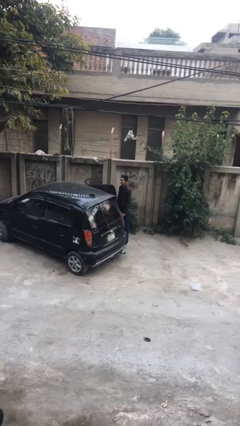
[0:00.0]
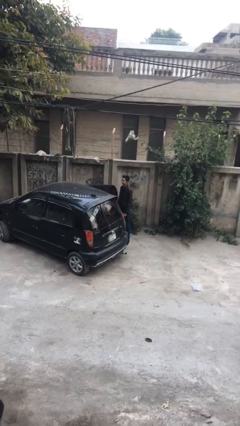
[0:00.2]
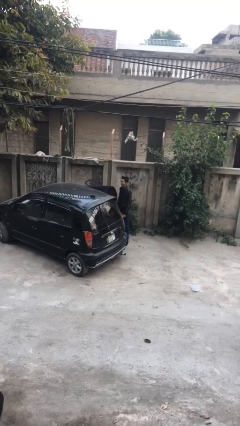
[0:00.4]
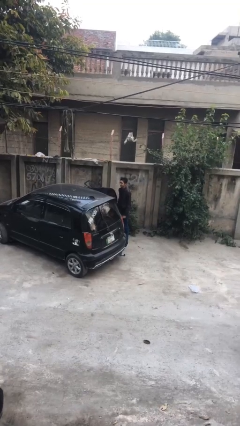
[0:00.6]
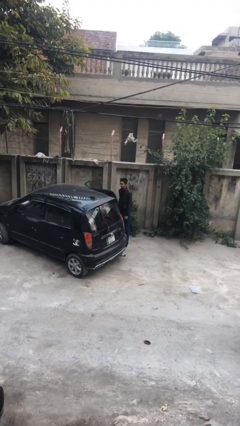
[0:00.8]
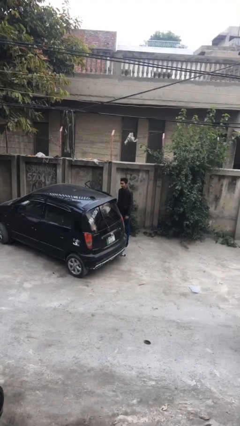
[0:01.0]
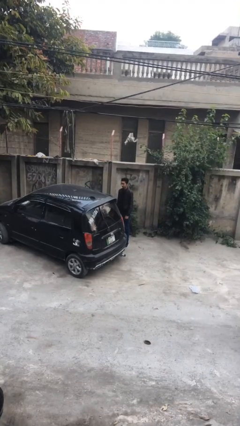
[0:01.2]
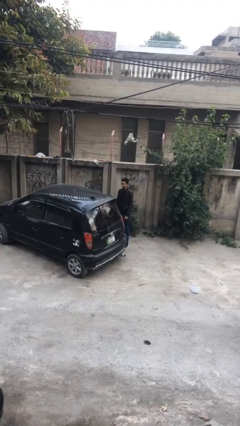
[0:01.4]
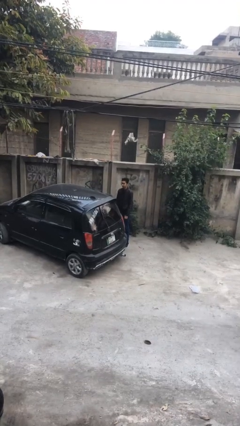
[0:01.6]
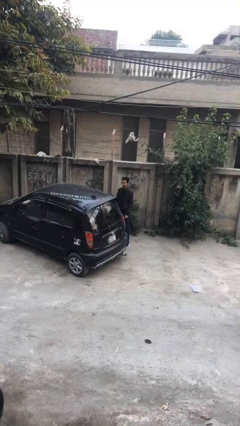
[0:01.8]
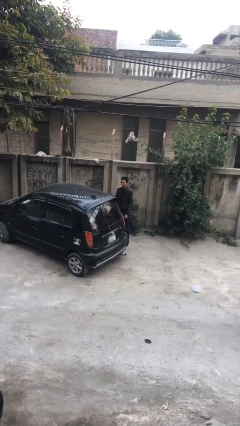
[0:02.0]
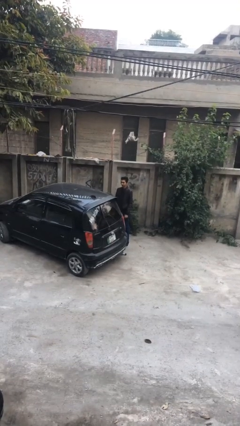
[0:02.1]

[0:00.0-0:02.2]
person closes car door

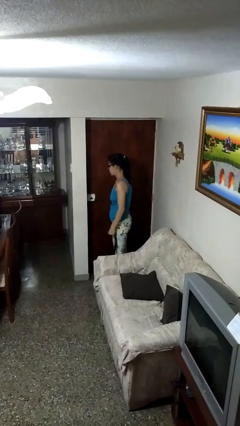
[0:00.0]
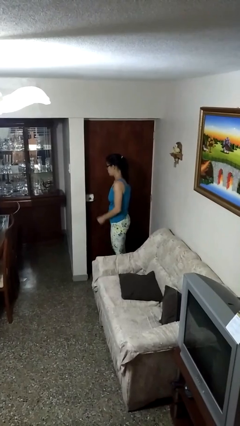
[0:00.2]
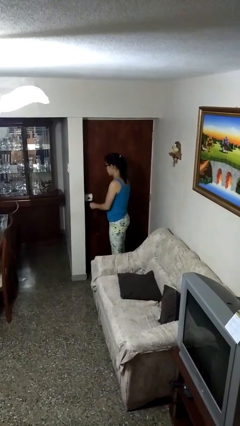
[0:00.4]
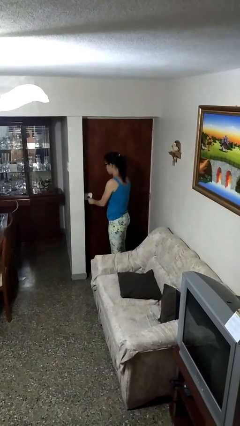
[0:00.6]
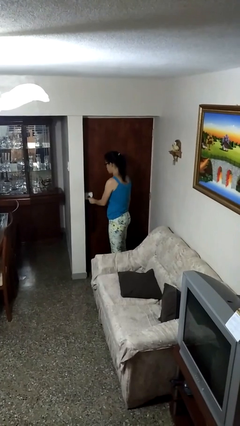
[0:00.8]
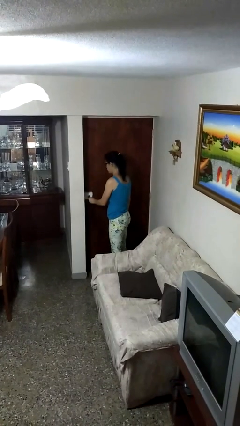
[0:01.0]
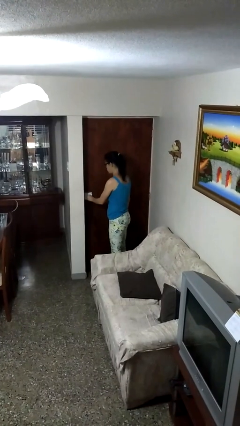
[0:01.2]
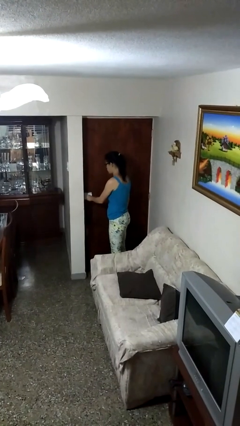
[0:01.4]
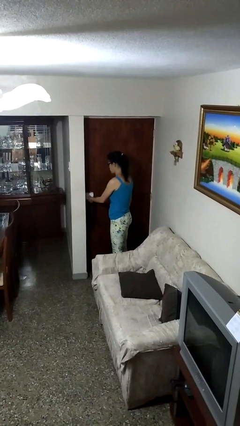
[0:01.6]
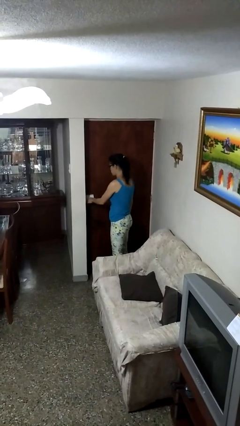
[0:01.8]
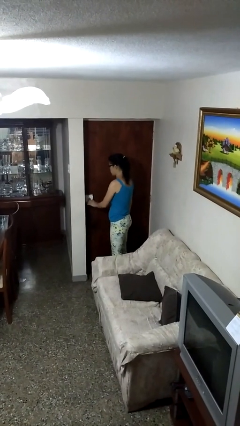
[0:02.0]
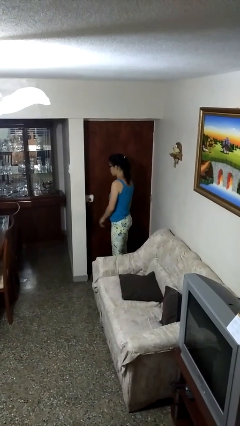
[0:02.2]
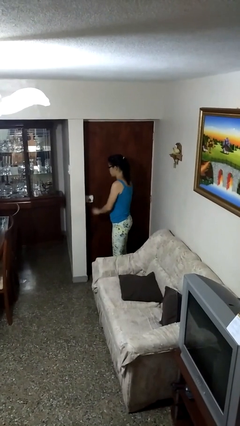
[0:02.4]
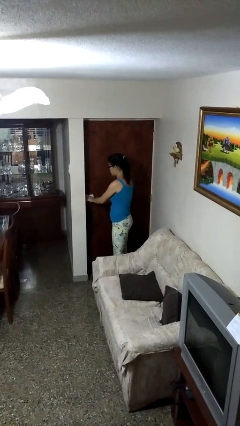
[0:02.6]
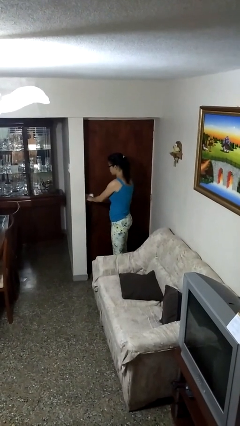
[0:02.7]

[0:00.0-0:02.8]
person unlocks door with keys

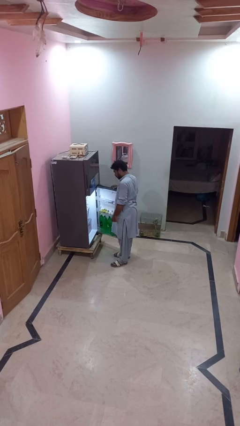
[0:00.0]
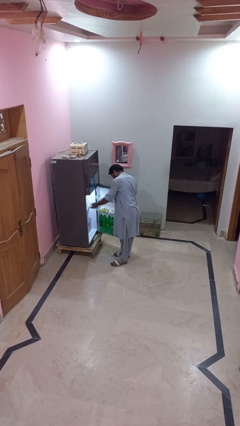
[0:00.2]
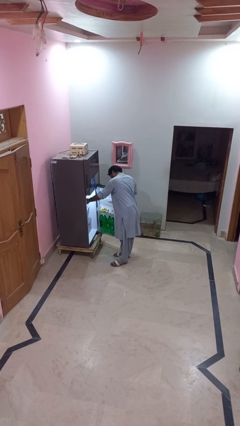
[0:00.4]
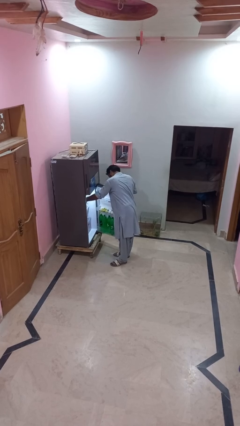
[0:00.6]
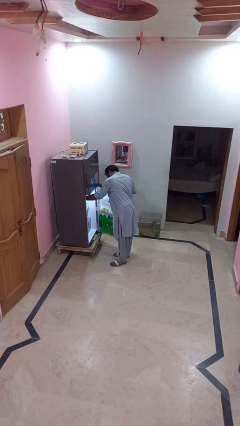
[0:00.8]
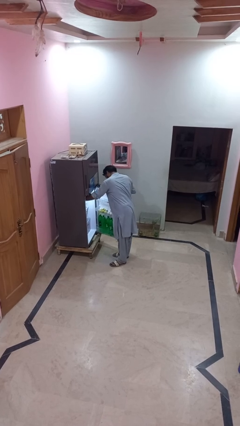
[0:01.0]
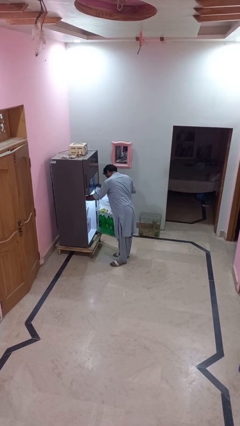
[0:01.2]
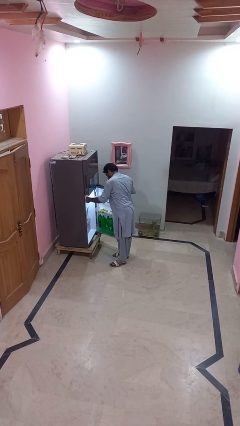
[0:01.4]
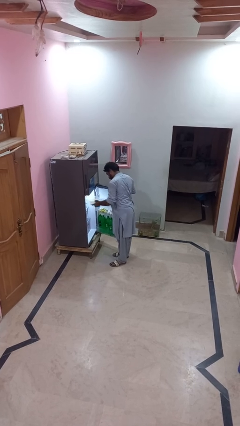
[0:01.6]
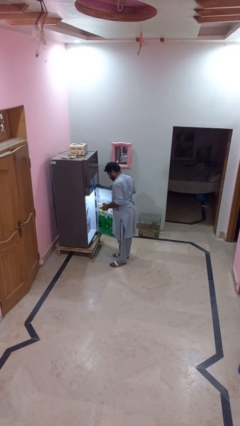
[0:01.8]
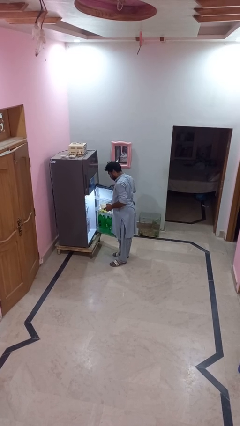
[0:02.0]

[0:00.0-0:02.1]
person takes object from refrigerator

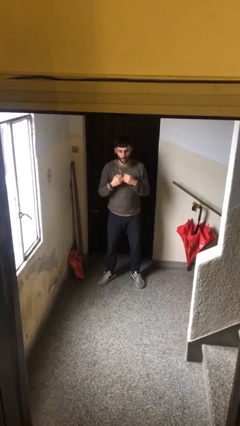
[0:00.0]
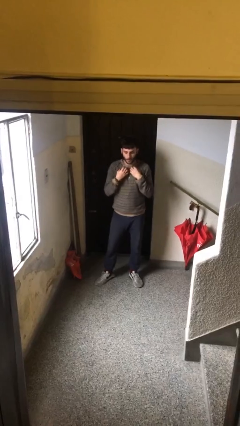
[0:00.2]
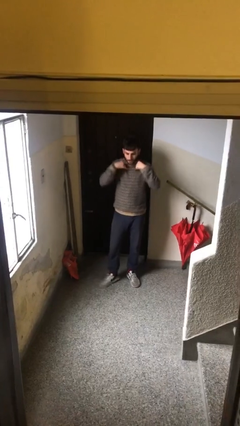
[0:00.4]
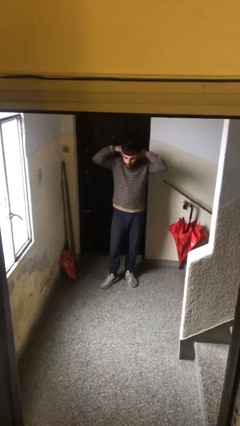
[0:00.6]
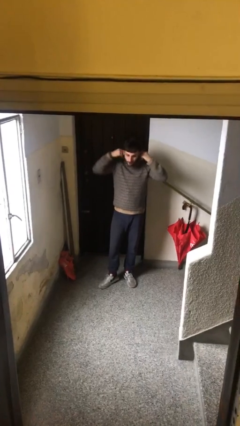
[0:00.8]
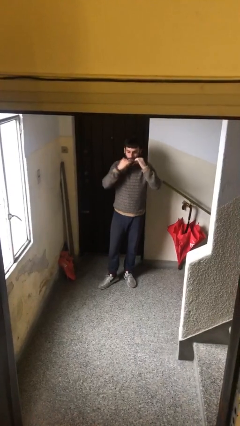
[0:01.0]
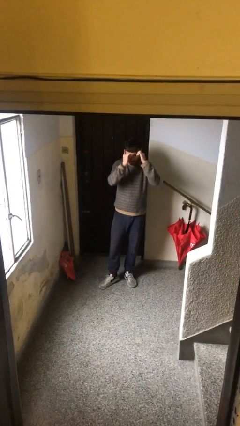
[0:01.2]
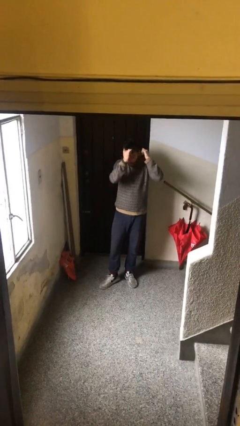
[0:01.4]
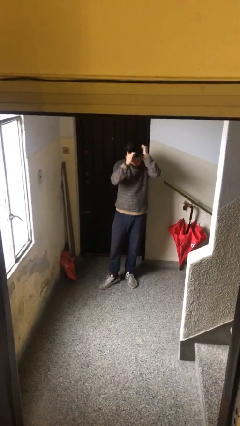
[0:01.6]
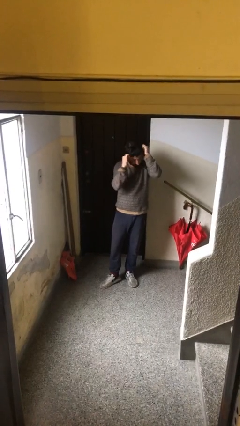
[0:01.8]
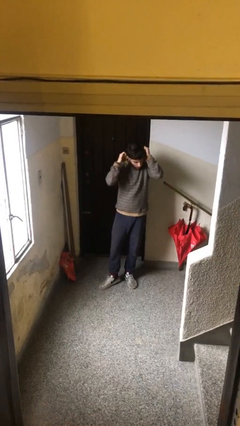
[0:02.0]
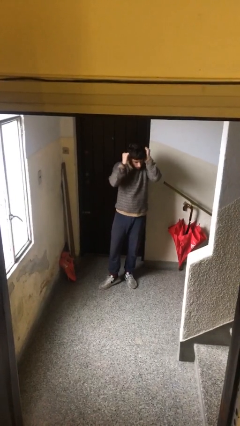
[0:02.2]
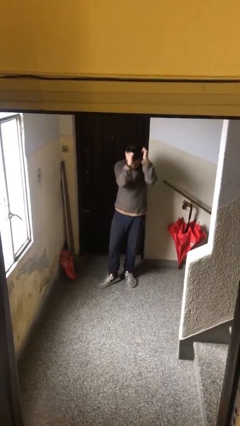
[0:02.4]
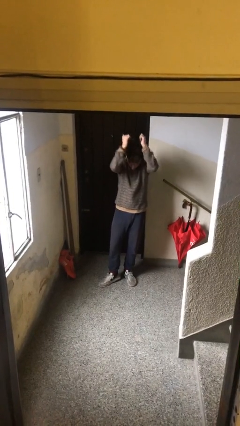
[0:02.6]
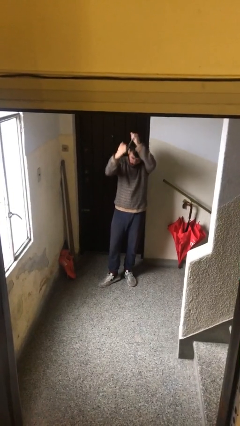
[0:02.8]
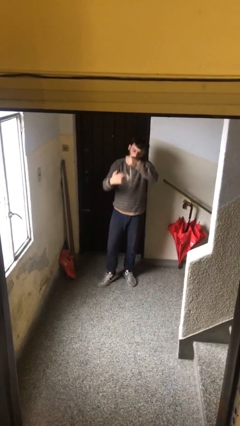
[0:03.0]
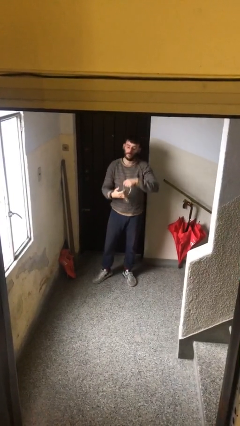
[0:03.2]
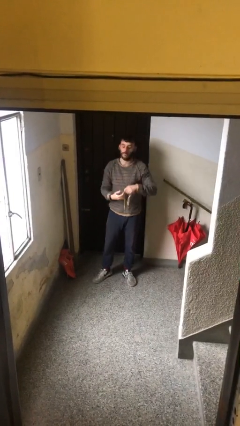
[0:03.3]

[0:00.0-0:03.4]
person takes off necklace

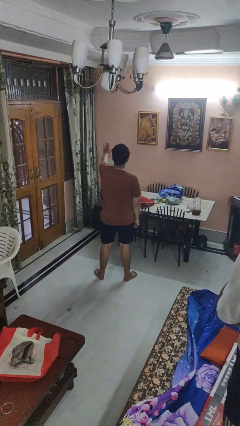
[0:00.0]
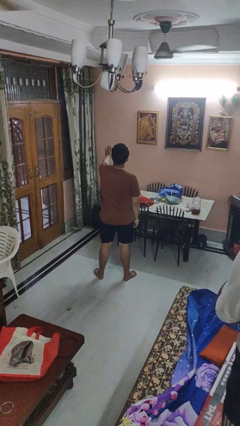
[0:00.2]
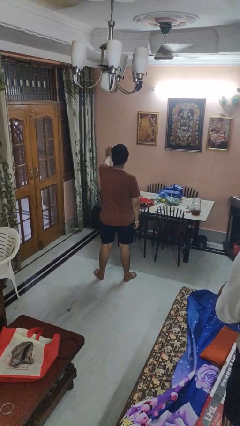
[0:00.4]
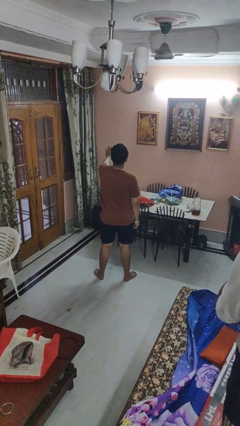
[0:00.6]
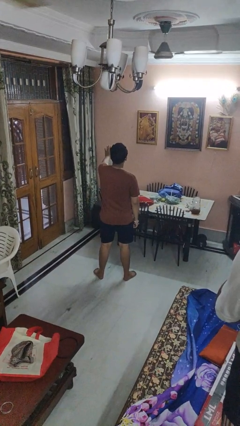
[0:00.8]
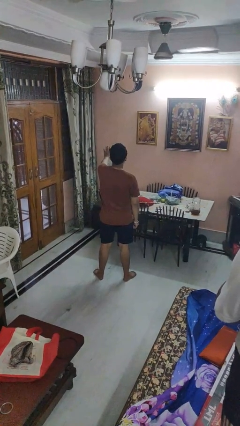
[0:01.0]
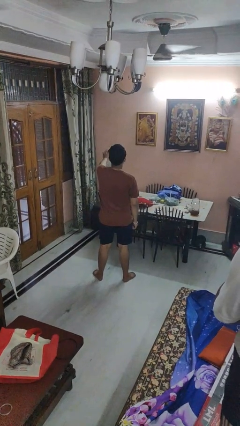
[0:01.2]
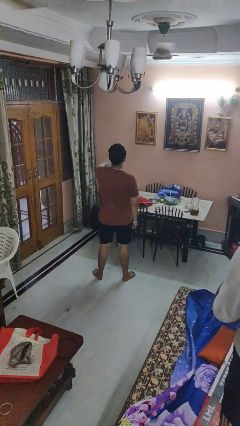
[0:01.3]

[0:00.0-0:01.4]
person gestures stop

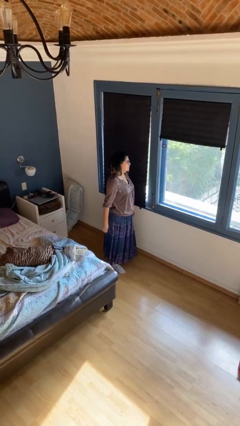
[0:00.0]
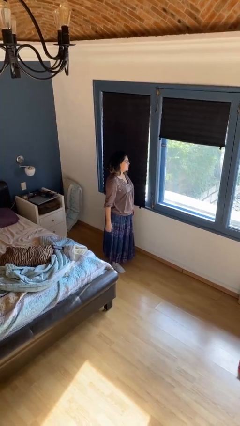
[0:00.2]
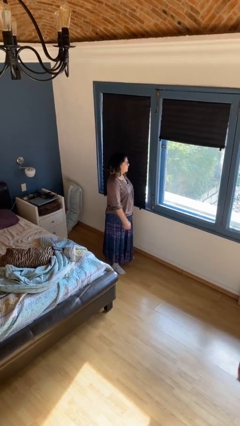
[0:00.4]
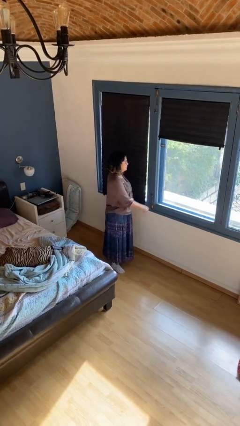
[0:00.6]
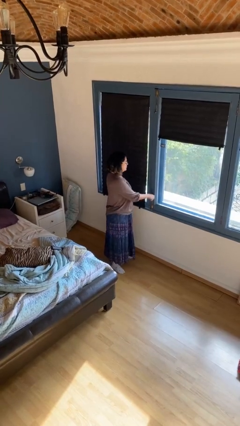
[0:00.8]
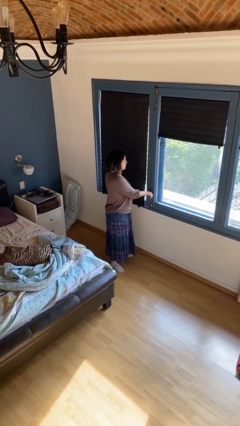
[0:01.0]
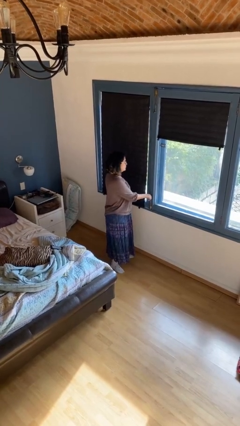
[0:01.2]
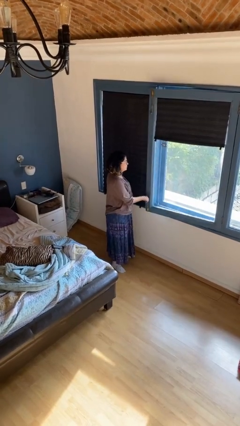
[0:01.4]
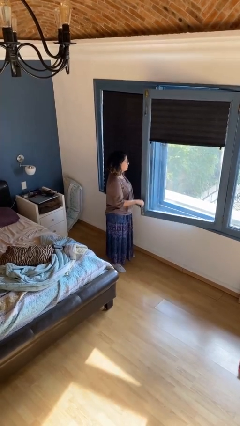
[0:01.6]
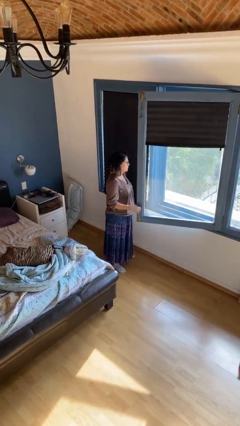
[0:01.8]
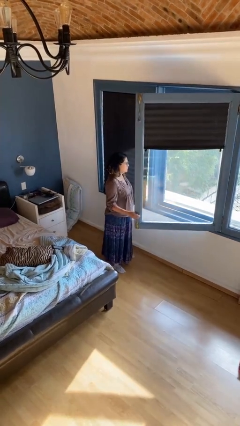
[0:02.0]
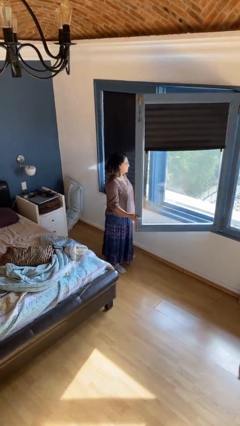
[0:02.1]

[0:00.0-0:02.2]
person opens home window

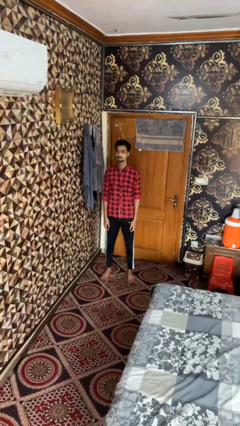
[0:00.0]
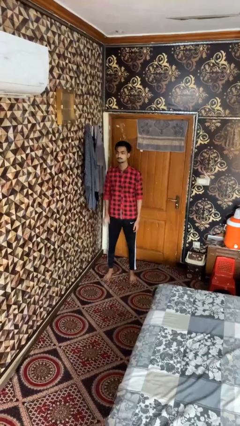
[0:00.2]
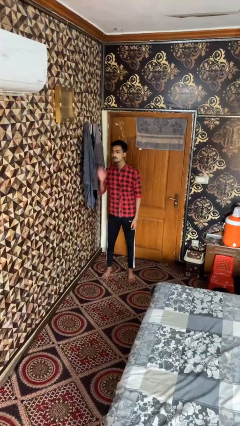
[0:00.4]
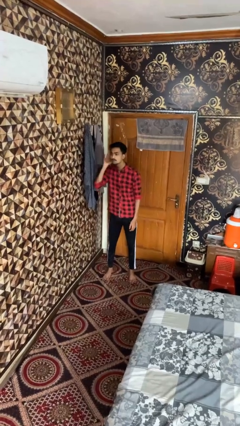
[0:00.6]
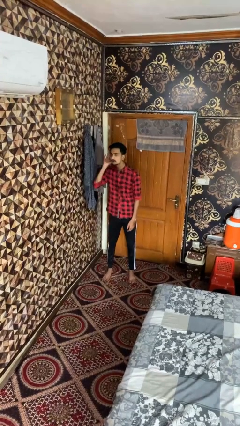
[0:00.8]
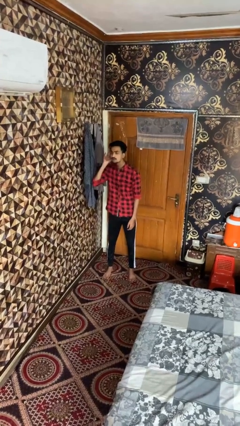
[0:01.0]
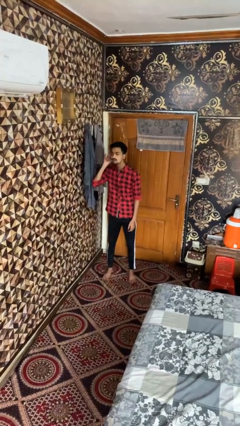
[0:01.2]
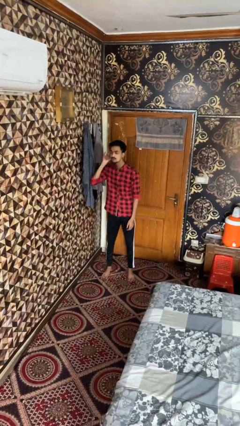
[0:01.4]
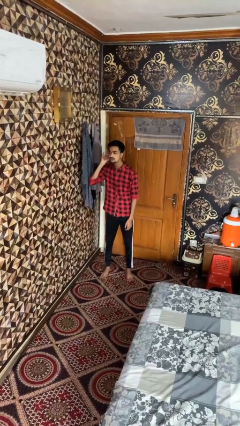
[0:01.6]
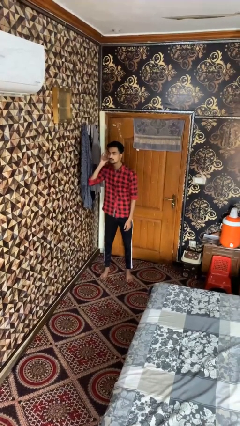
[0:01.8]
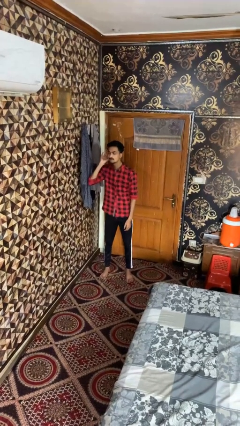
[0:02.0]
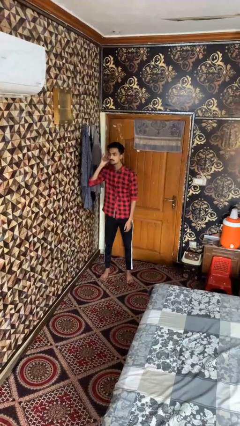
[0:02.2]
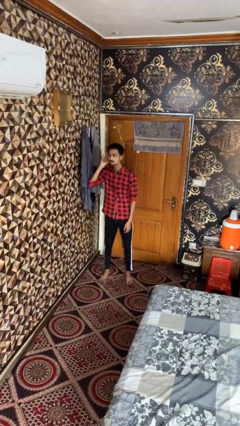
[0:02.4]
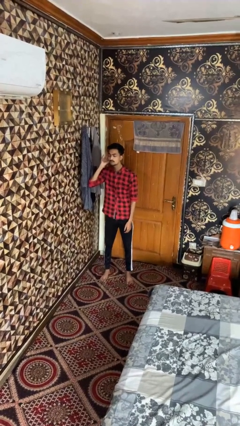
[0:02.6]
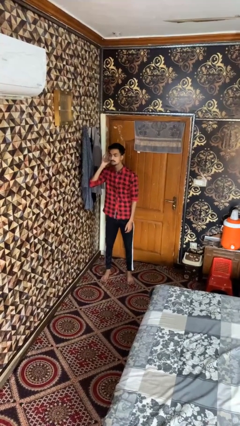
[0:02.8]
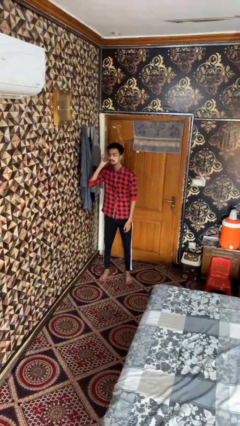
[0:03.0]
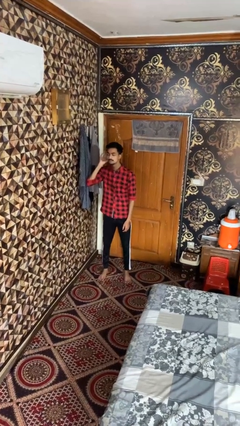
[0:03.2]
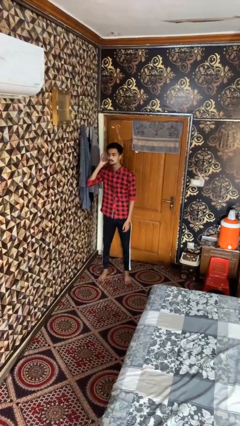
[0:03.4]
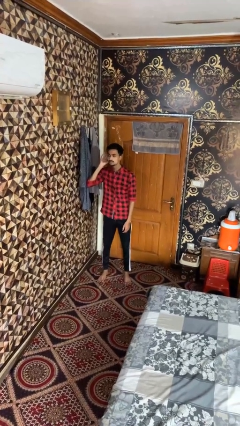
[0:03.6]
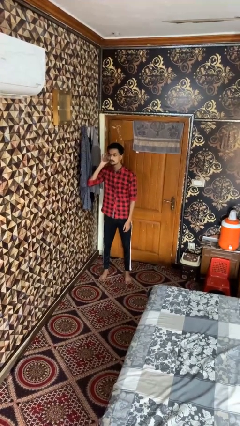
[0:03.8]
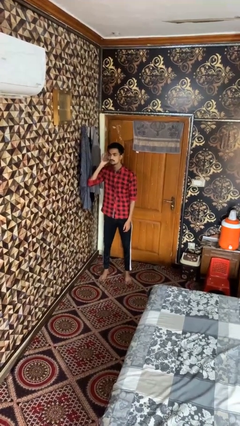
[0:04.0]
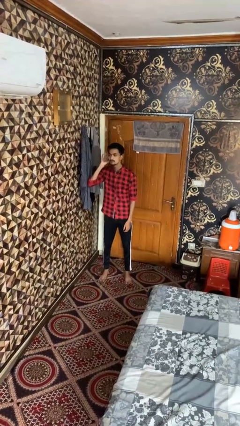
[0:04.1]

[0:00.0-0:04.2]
person gestures listen closely
